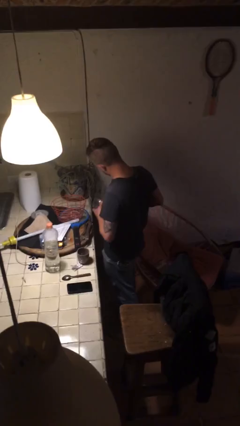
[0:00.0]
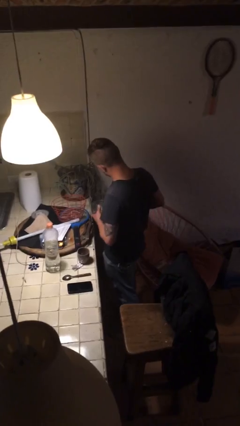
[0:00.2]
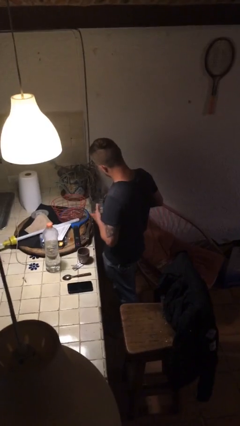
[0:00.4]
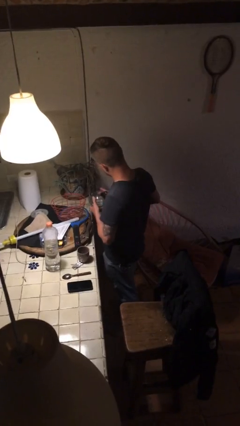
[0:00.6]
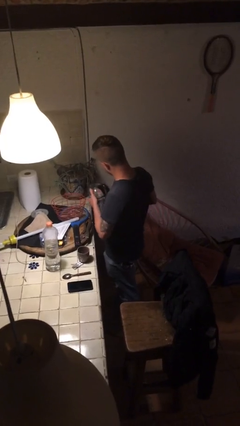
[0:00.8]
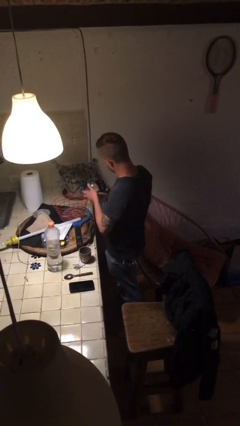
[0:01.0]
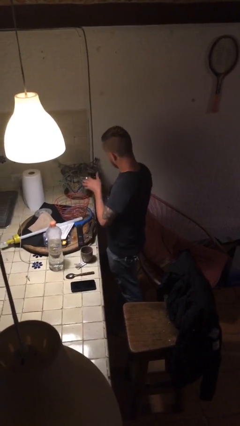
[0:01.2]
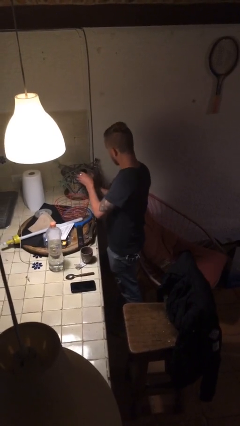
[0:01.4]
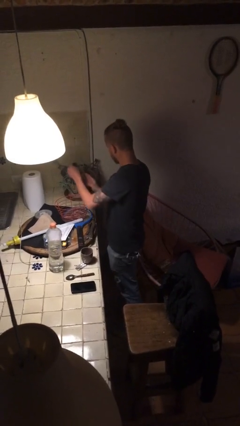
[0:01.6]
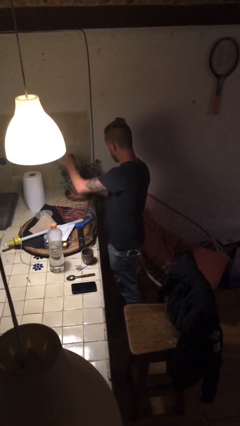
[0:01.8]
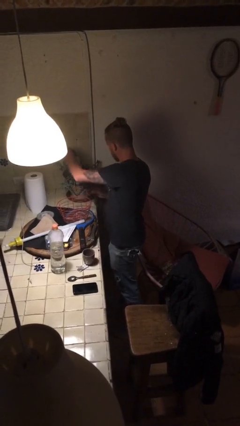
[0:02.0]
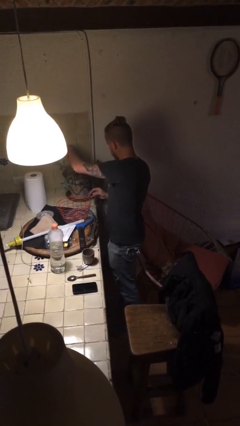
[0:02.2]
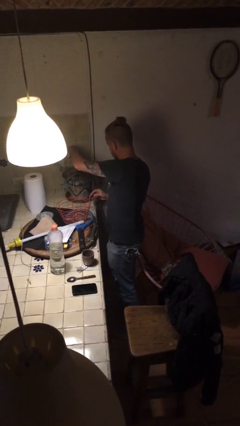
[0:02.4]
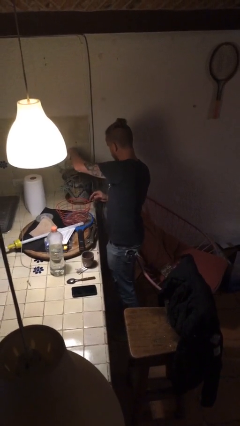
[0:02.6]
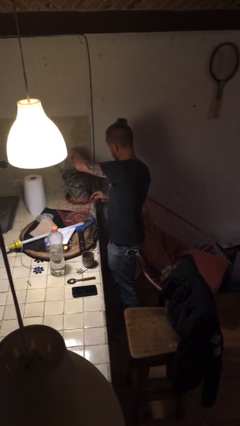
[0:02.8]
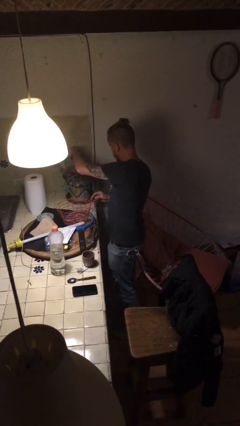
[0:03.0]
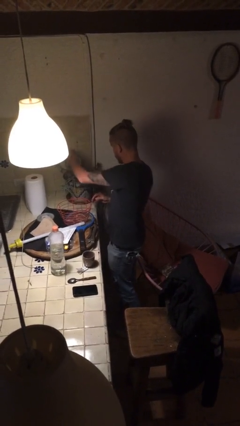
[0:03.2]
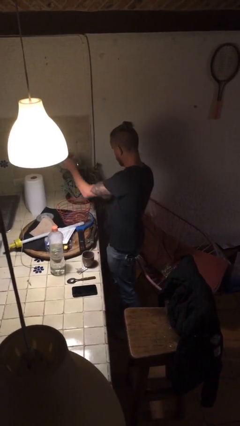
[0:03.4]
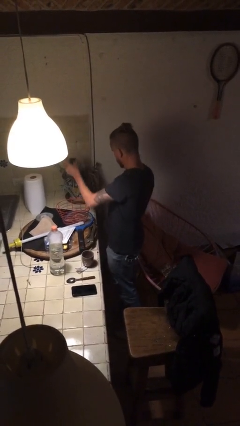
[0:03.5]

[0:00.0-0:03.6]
person waters houseplant

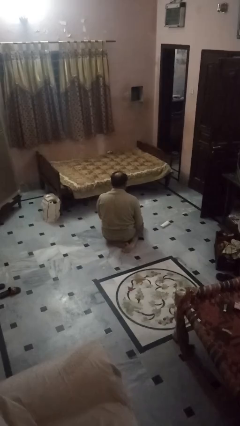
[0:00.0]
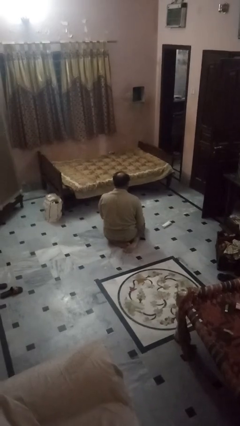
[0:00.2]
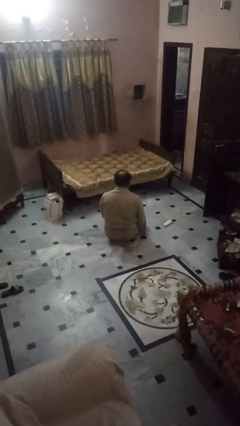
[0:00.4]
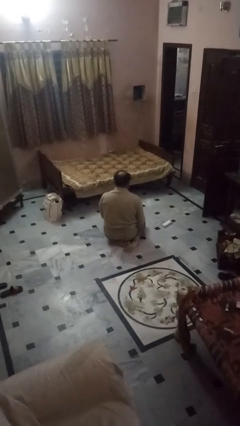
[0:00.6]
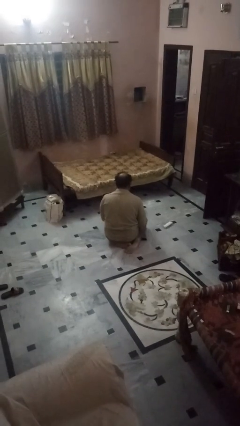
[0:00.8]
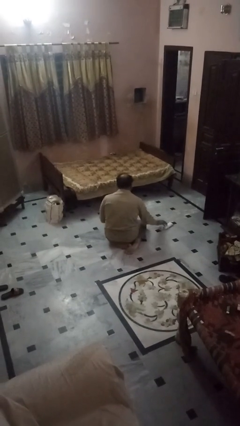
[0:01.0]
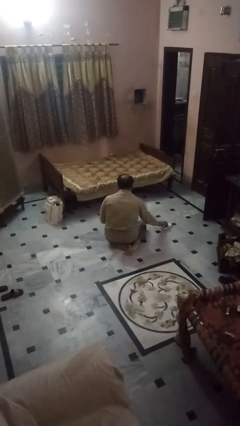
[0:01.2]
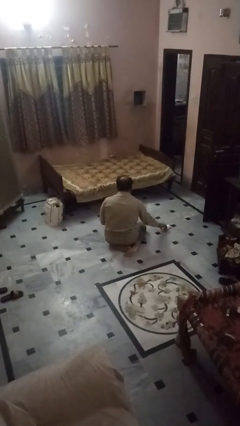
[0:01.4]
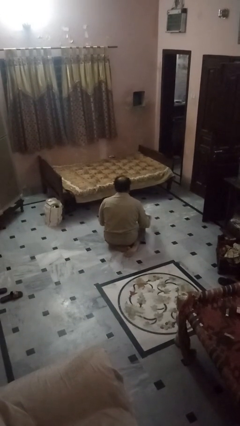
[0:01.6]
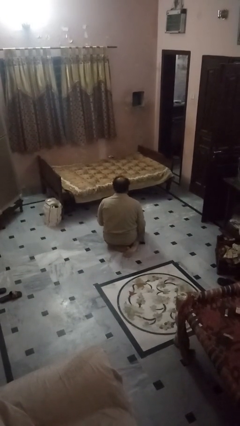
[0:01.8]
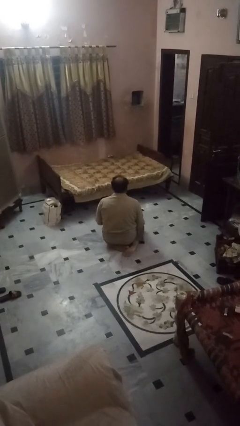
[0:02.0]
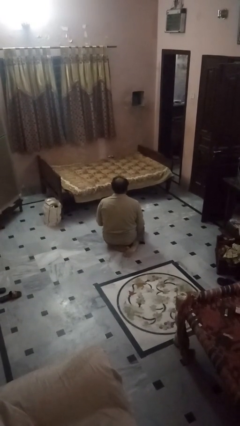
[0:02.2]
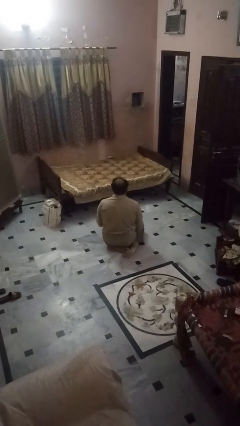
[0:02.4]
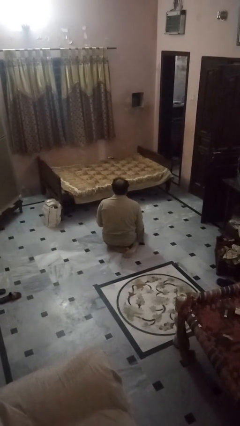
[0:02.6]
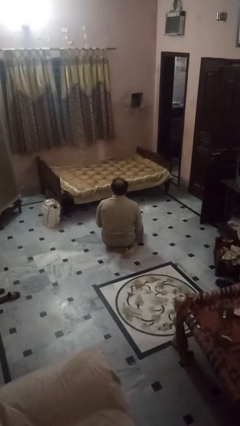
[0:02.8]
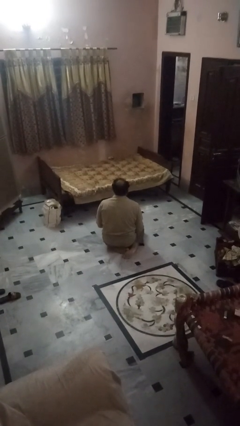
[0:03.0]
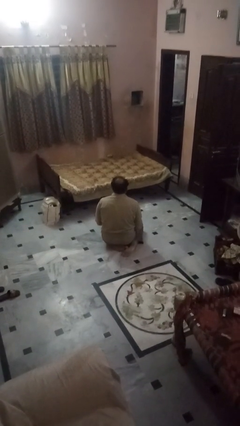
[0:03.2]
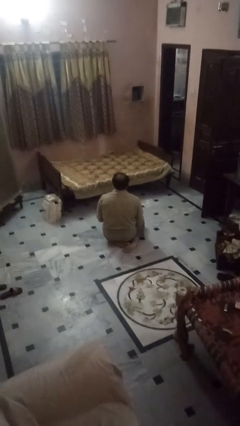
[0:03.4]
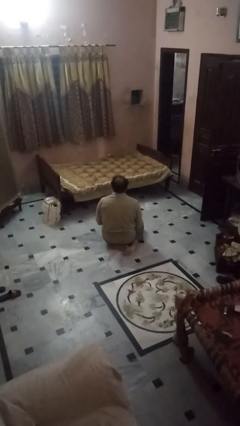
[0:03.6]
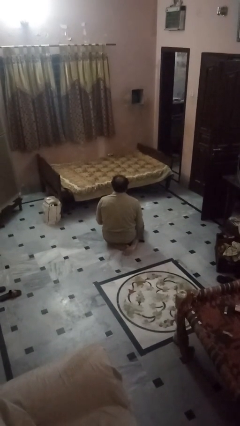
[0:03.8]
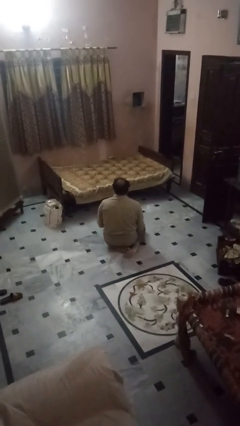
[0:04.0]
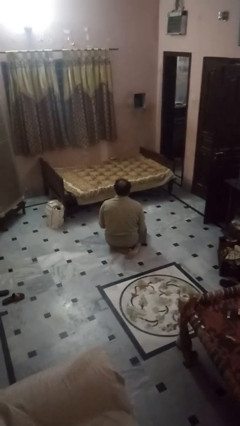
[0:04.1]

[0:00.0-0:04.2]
person picks up object from floor

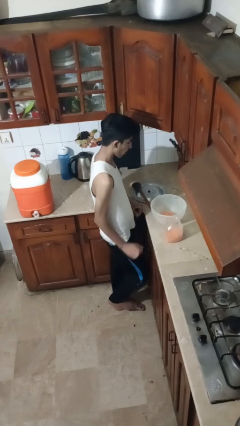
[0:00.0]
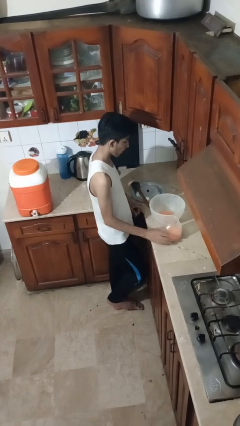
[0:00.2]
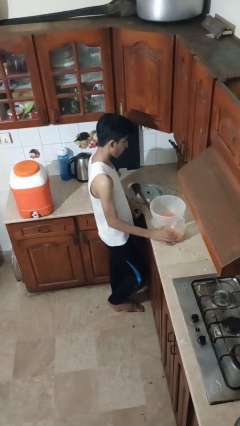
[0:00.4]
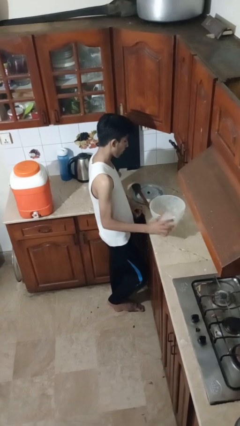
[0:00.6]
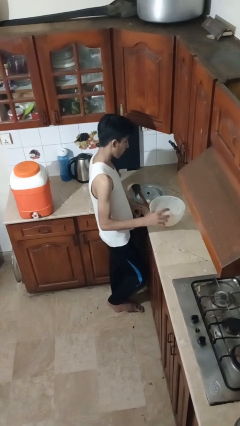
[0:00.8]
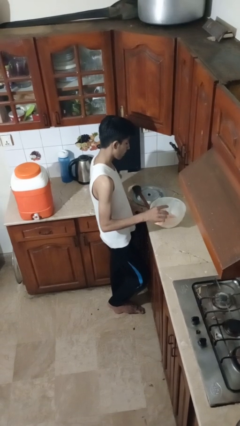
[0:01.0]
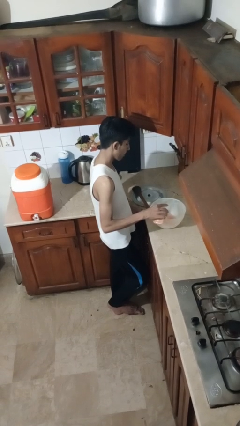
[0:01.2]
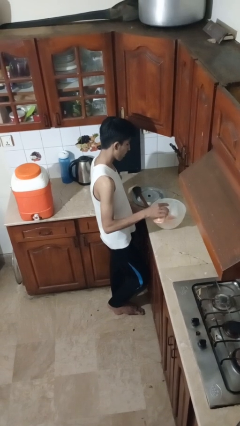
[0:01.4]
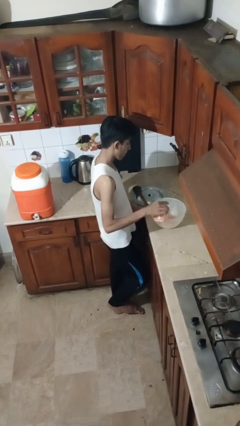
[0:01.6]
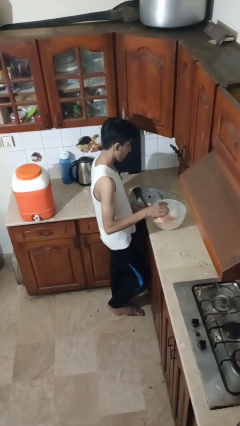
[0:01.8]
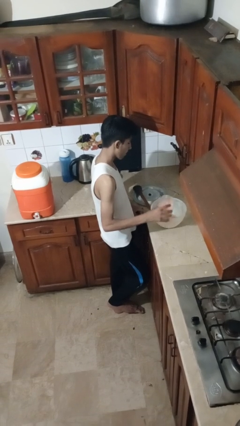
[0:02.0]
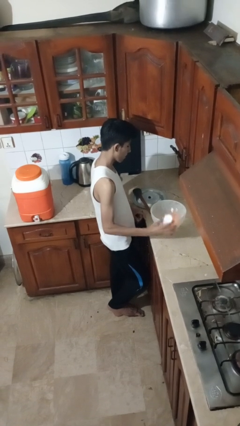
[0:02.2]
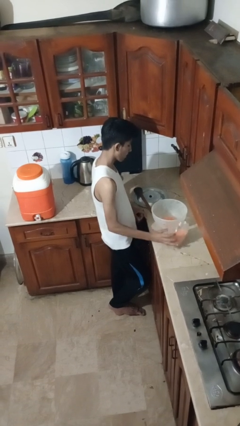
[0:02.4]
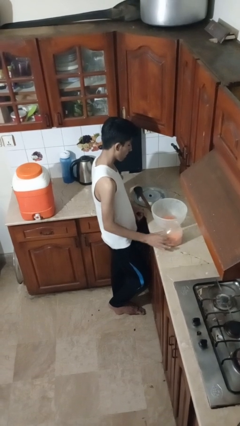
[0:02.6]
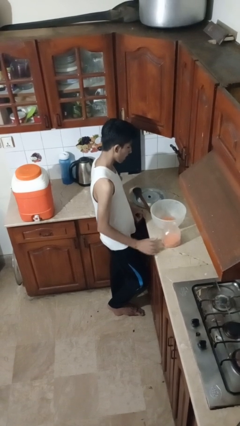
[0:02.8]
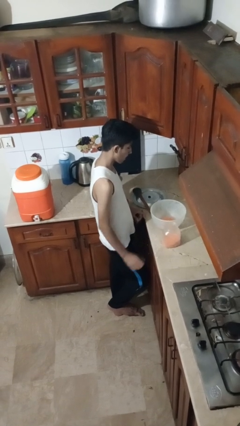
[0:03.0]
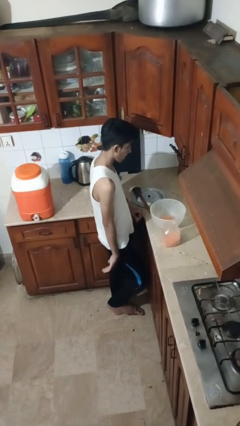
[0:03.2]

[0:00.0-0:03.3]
person pours into bowl

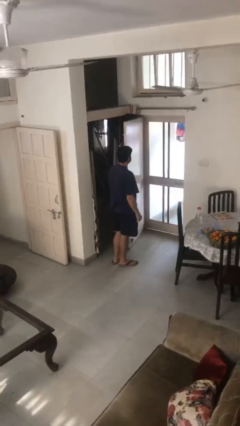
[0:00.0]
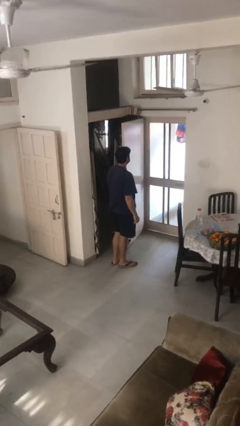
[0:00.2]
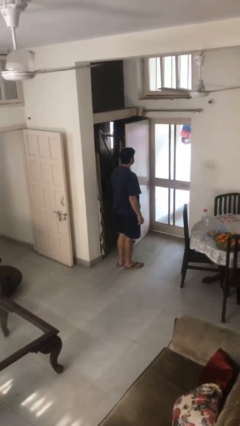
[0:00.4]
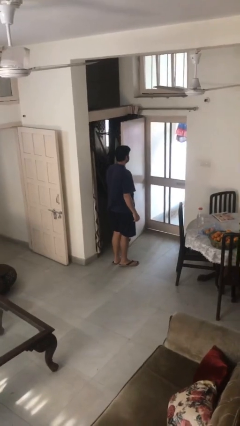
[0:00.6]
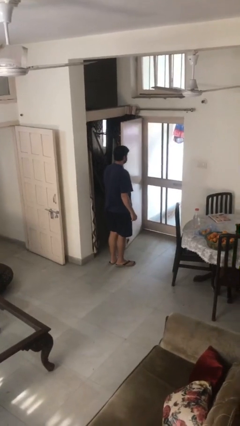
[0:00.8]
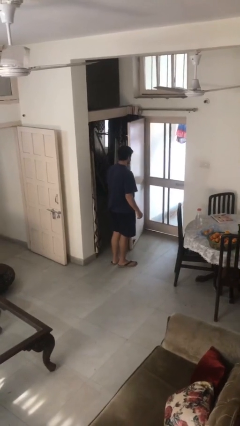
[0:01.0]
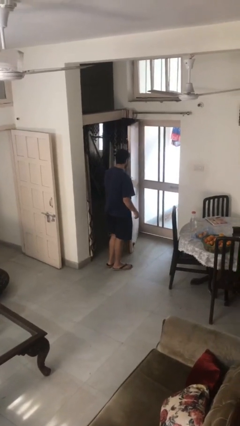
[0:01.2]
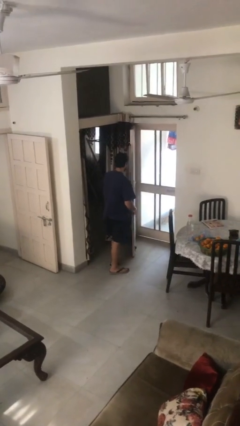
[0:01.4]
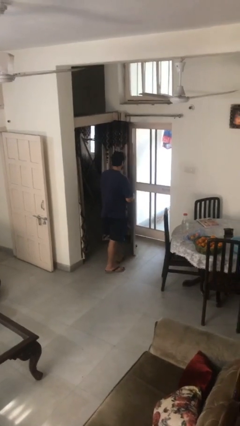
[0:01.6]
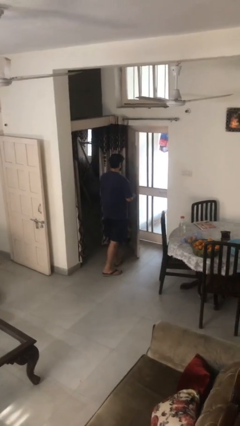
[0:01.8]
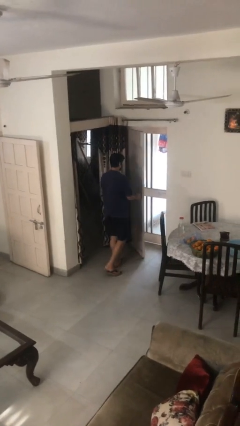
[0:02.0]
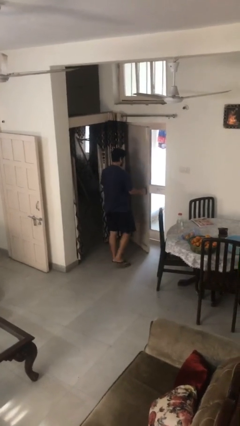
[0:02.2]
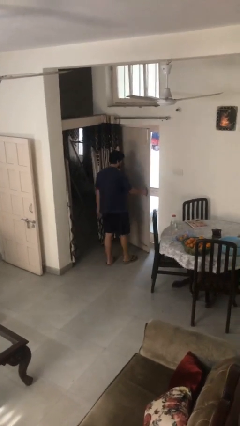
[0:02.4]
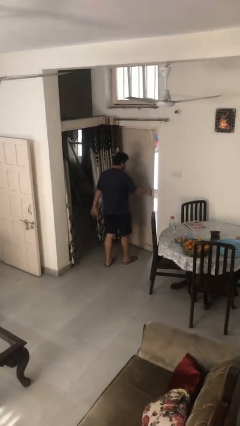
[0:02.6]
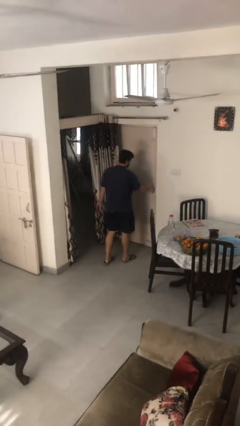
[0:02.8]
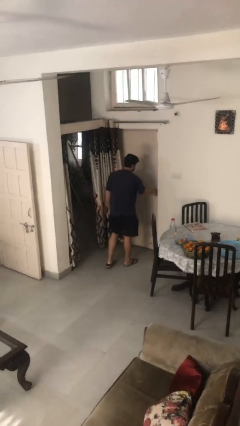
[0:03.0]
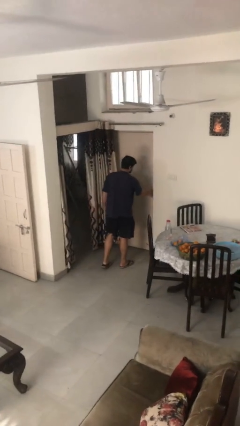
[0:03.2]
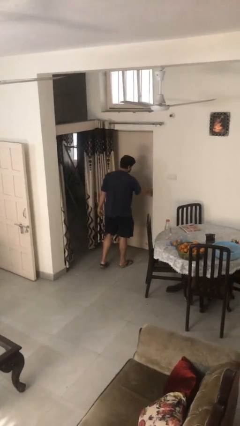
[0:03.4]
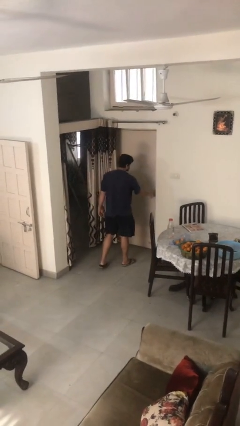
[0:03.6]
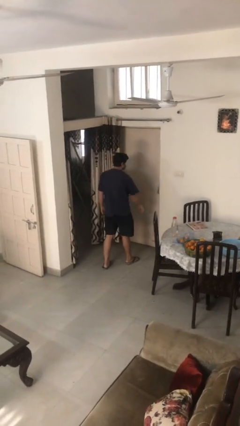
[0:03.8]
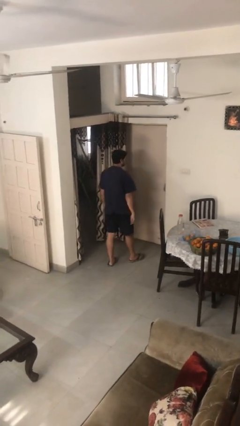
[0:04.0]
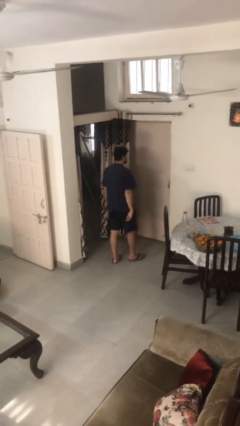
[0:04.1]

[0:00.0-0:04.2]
person closes facility door

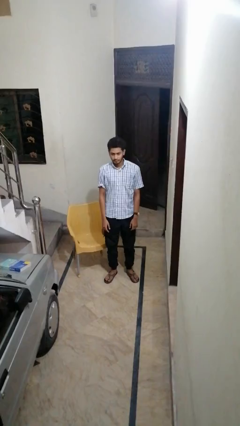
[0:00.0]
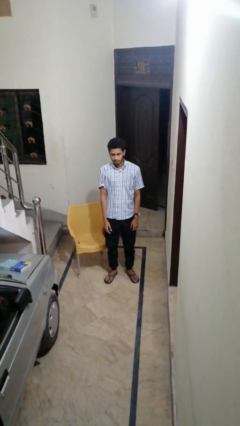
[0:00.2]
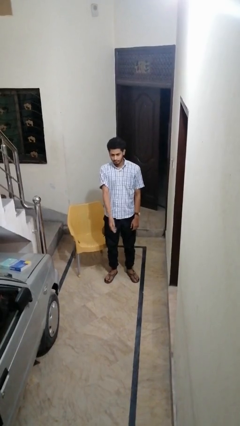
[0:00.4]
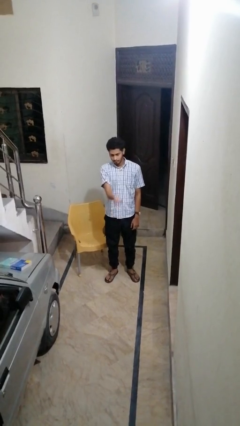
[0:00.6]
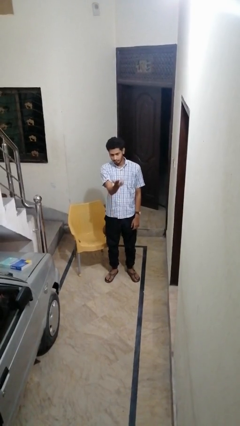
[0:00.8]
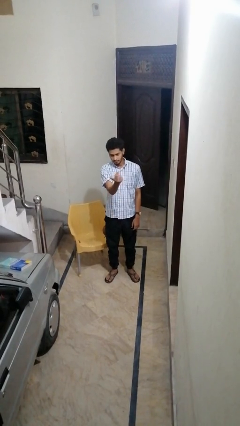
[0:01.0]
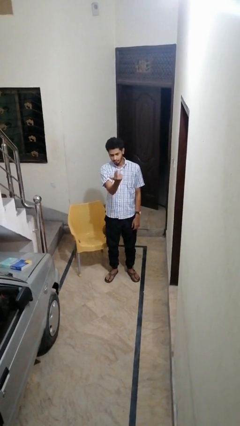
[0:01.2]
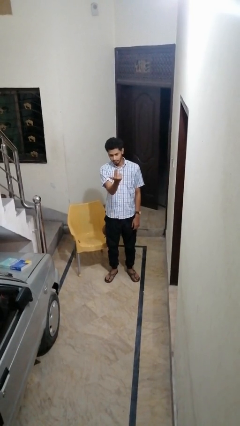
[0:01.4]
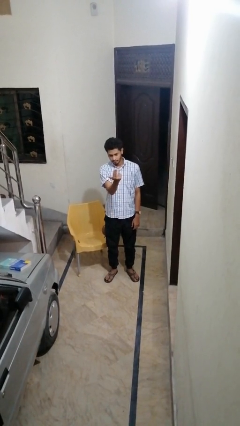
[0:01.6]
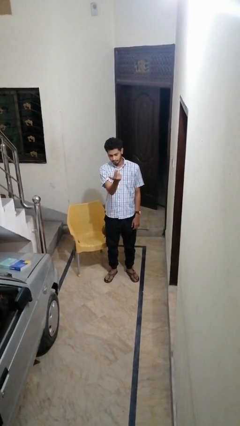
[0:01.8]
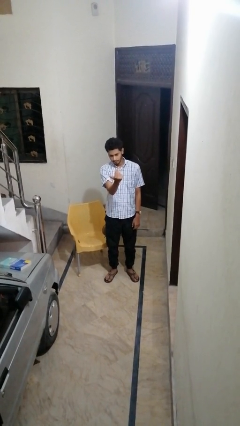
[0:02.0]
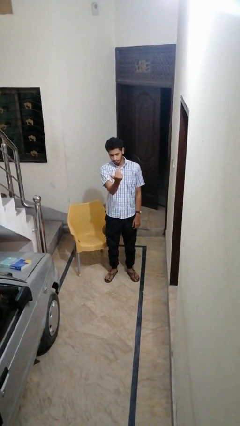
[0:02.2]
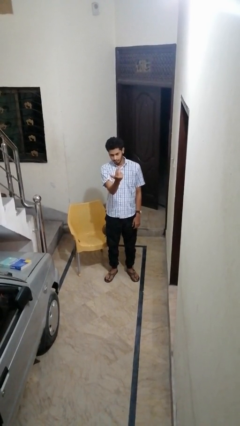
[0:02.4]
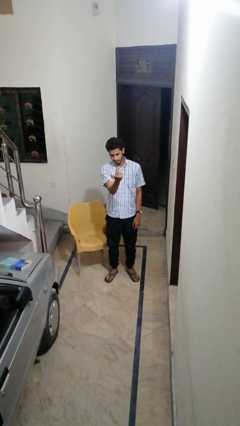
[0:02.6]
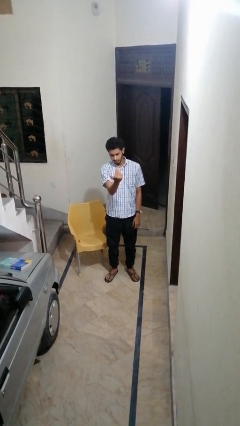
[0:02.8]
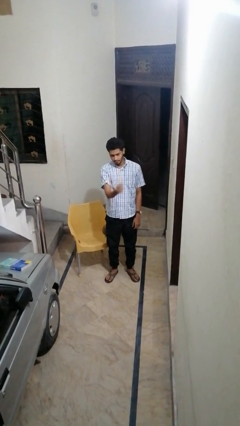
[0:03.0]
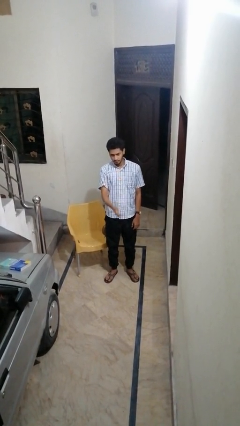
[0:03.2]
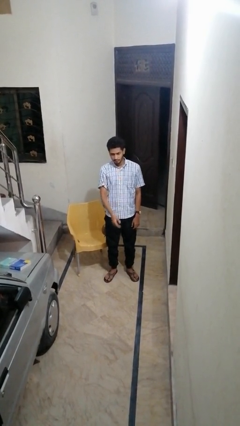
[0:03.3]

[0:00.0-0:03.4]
person gestures come here
